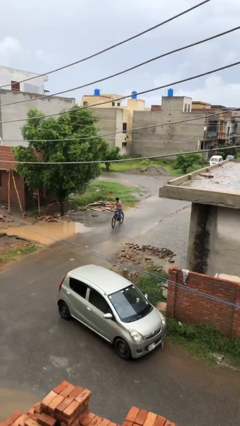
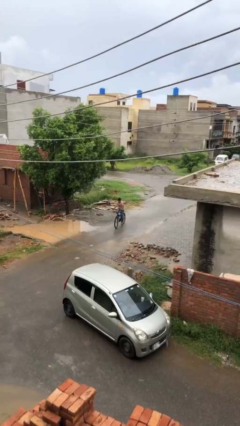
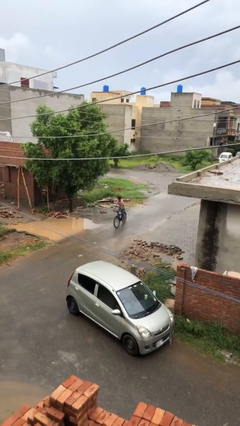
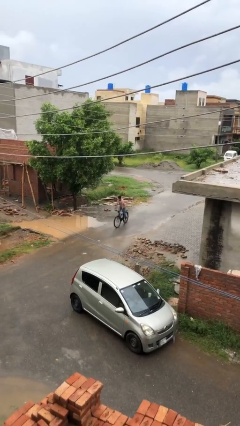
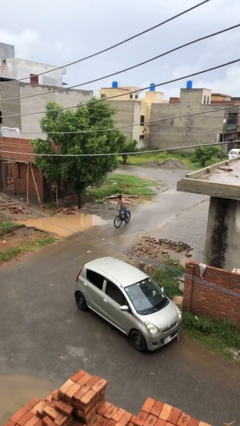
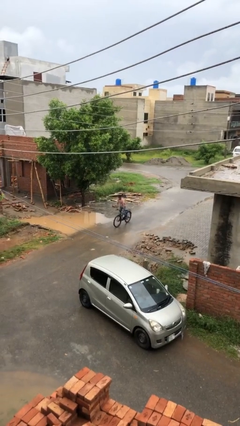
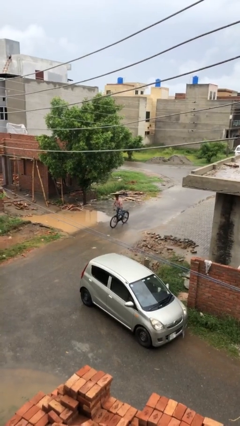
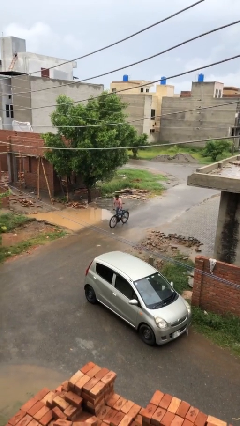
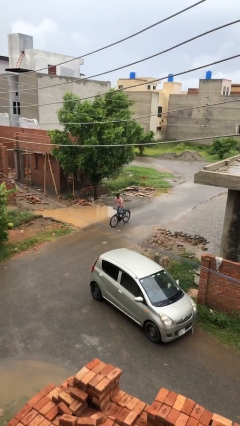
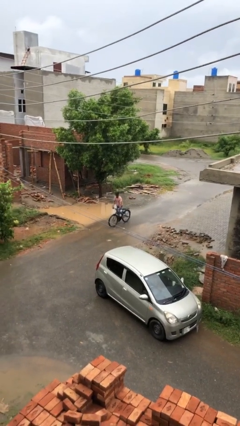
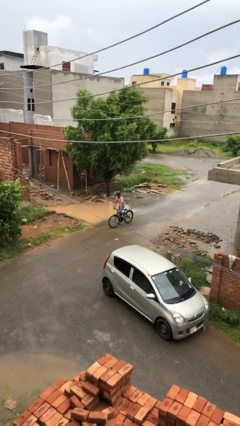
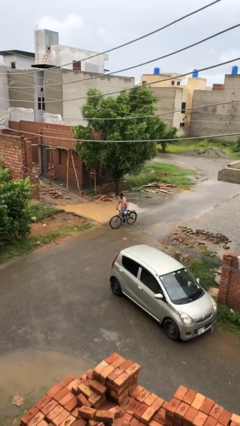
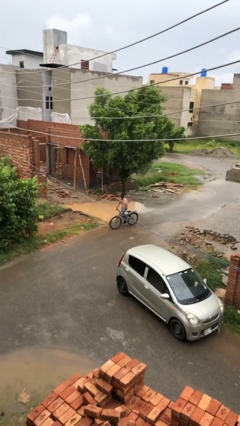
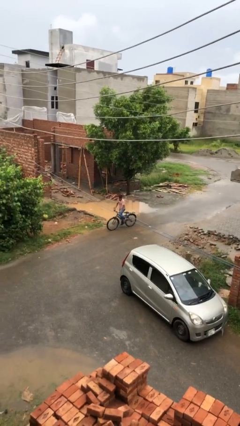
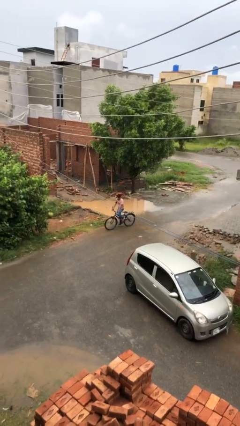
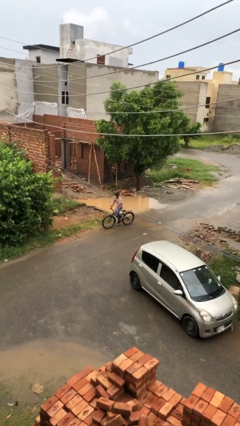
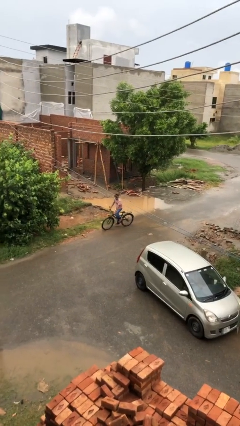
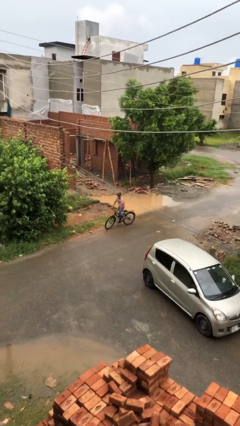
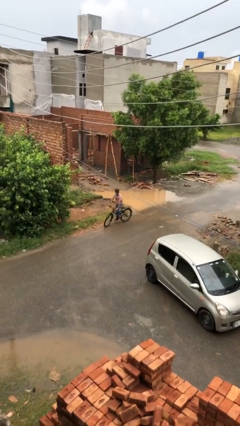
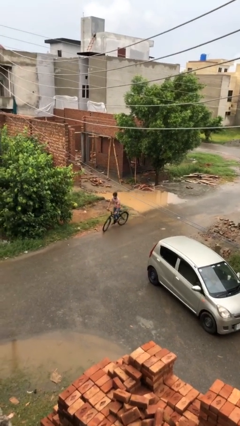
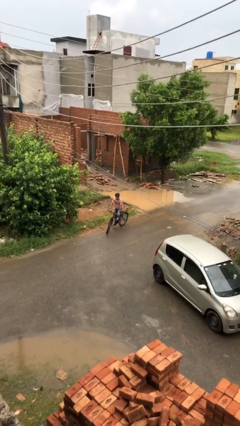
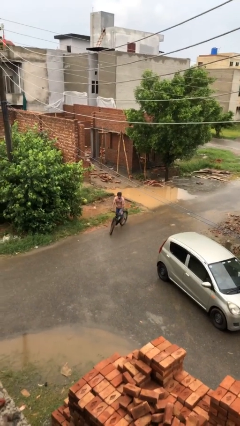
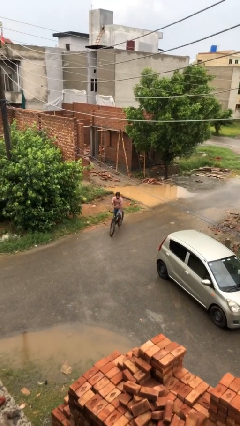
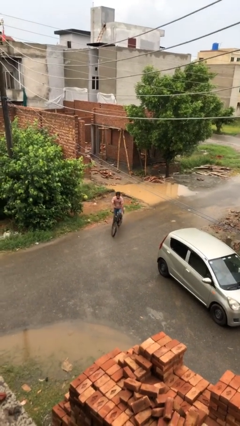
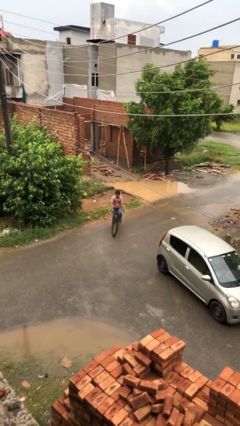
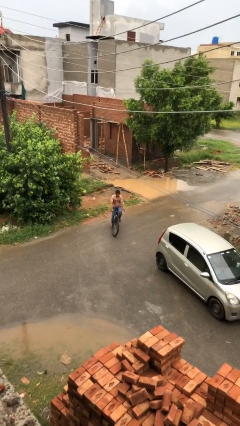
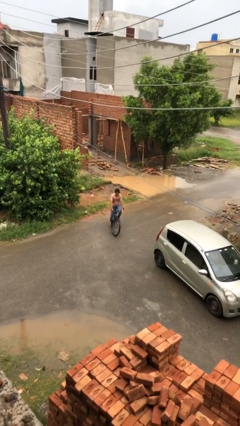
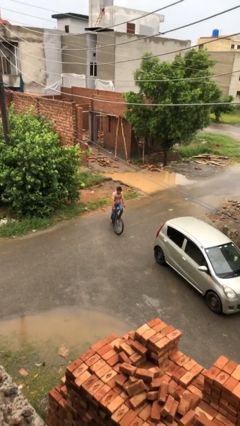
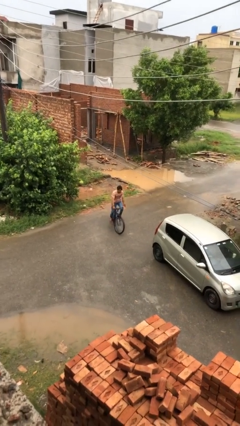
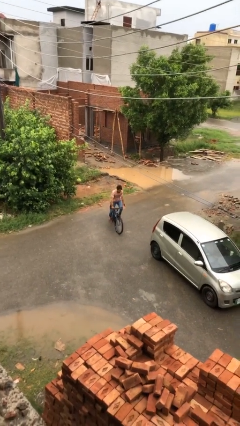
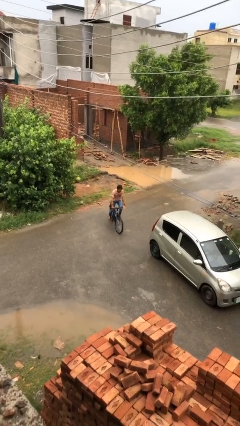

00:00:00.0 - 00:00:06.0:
person rides bicycle

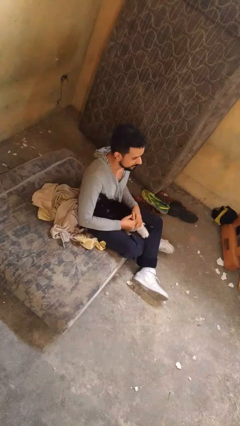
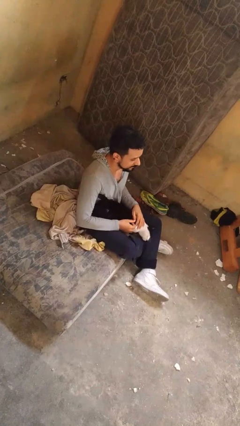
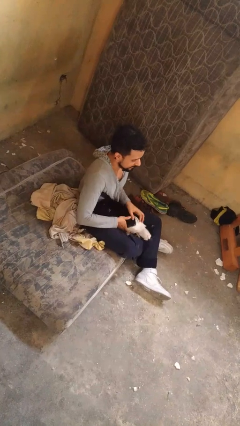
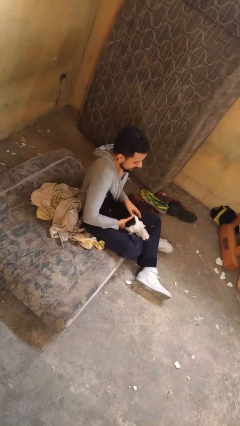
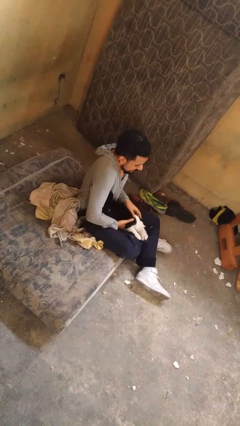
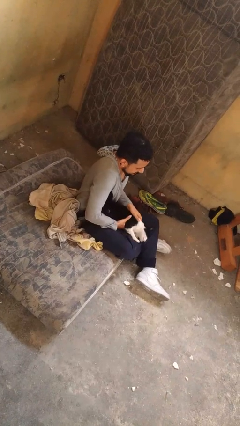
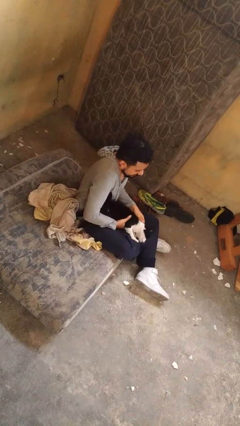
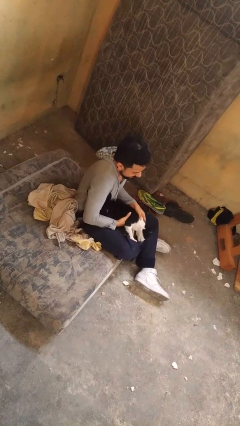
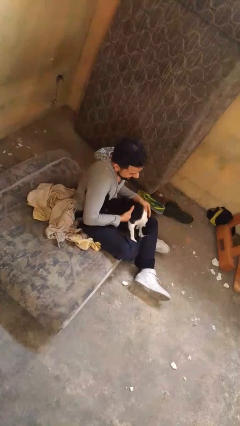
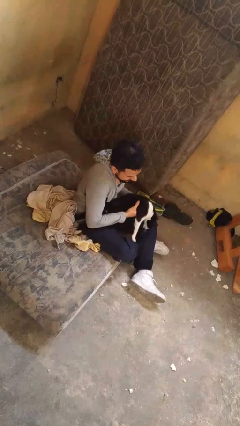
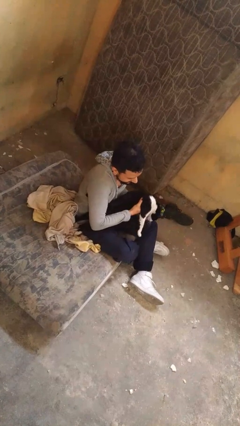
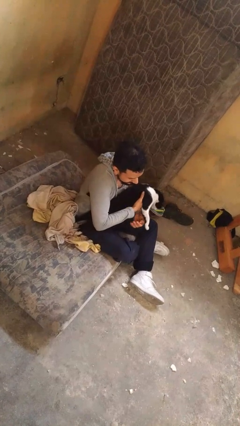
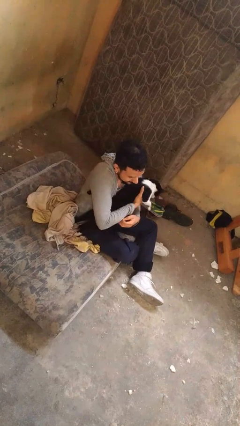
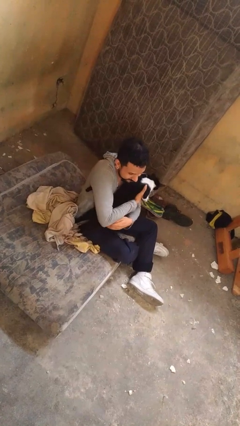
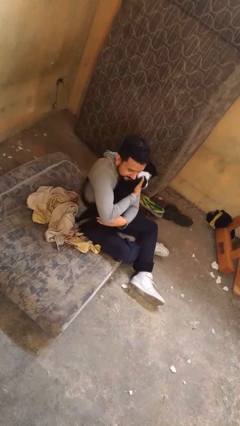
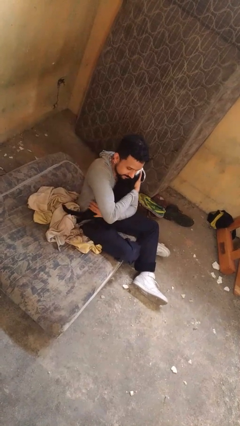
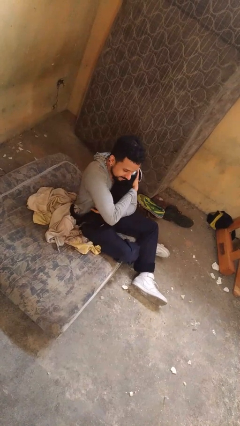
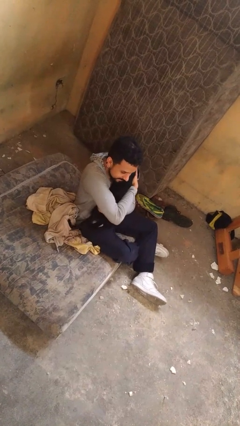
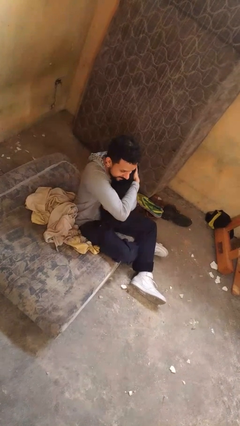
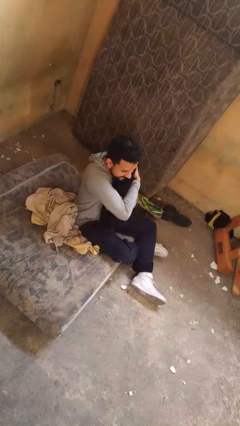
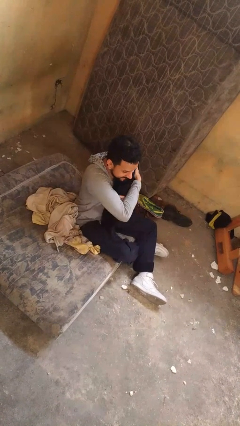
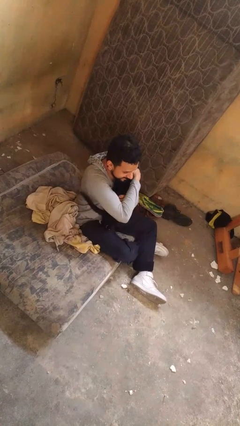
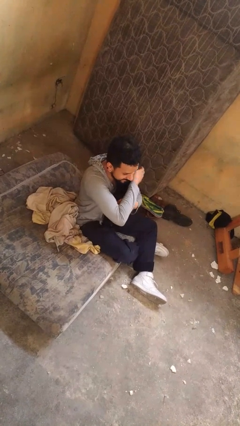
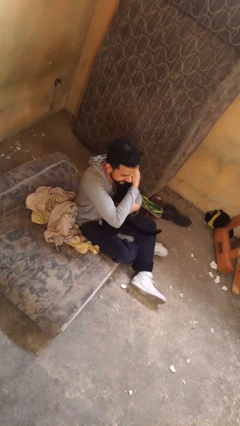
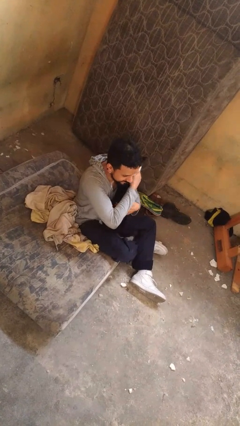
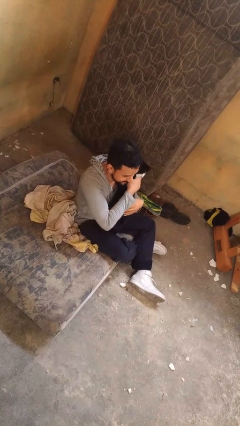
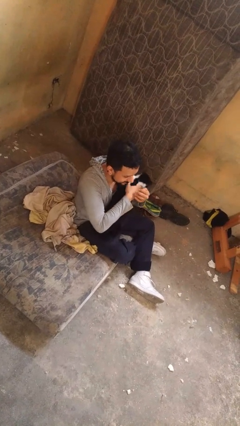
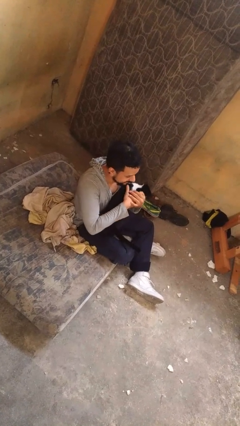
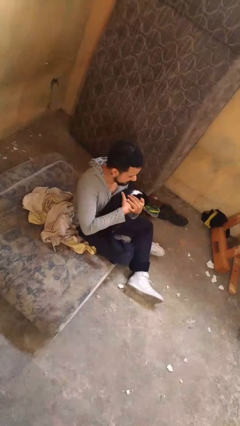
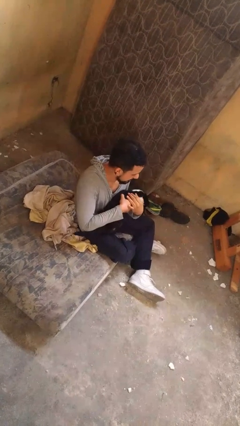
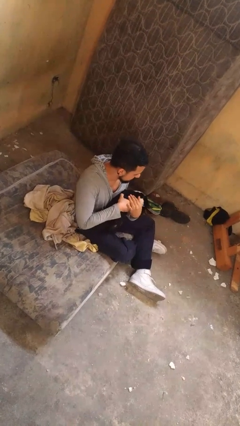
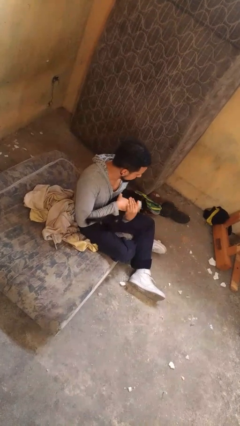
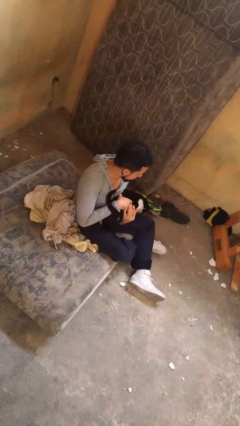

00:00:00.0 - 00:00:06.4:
person hugs cat

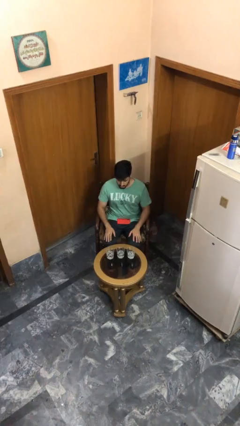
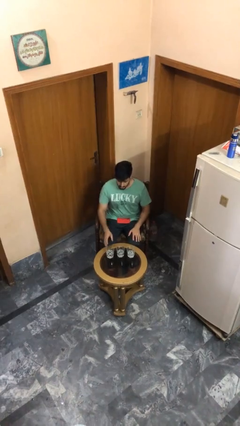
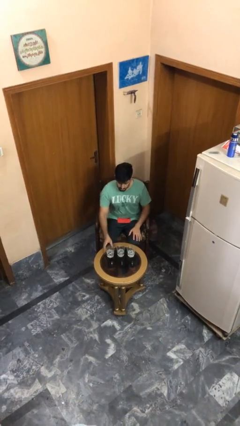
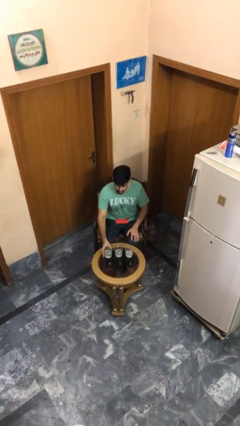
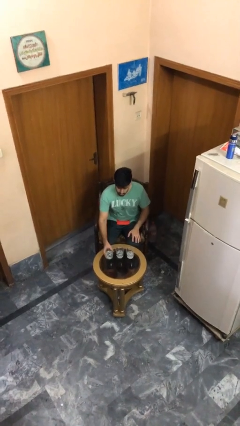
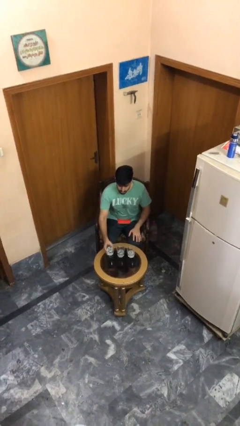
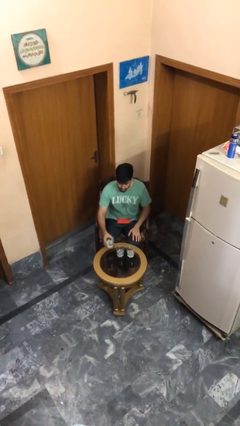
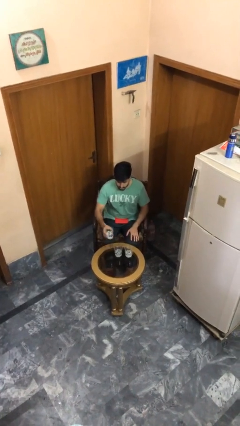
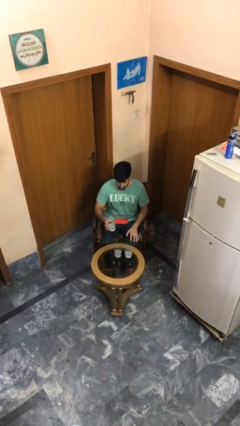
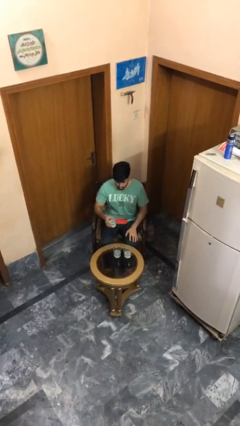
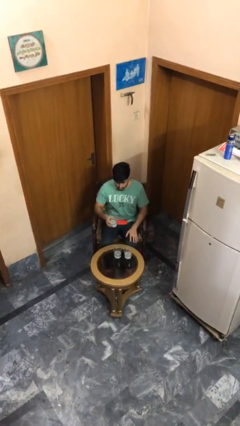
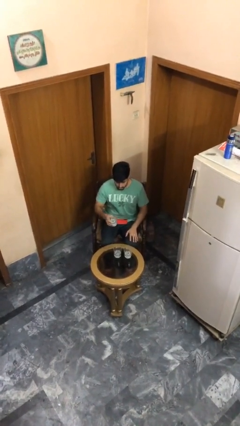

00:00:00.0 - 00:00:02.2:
person picks up object from table

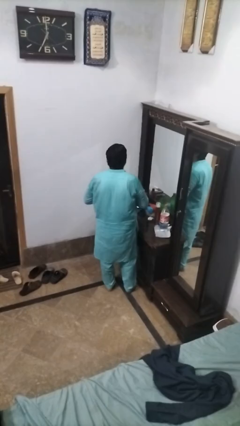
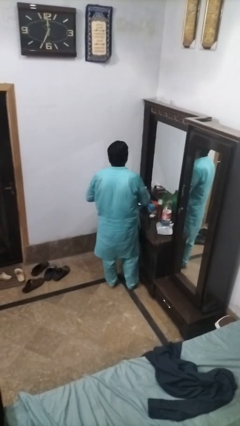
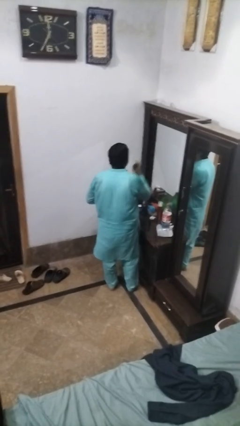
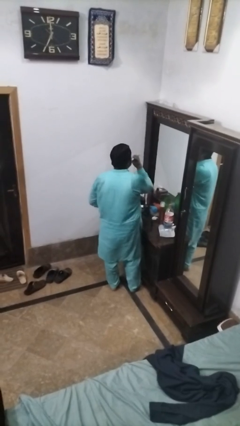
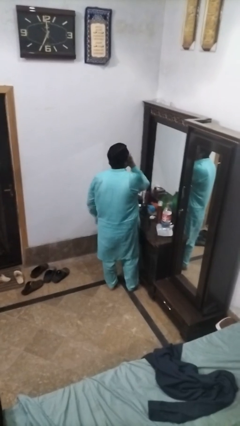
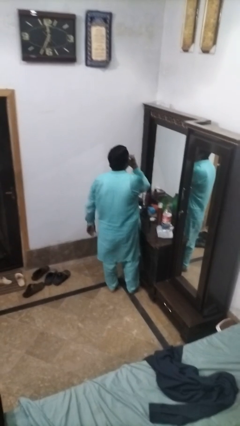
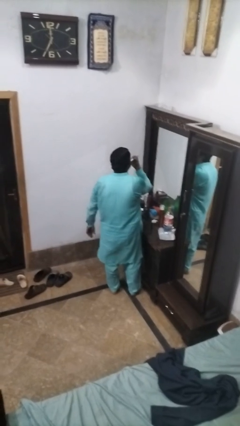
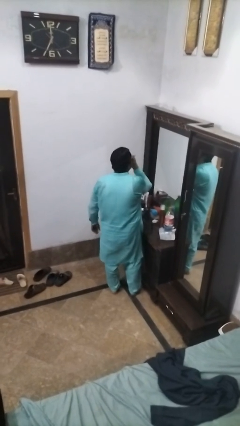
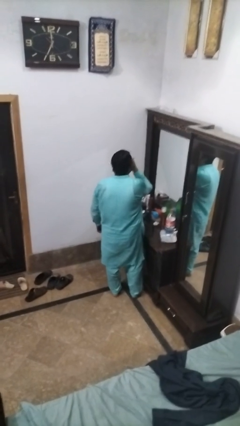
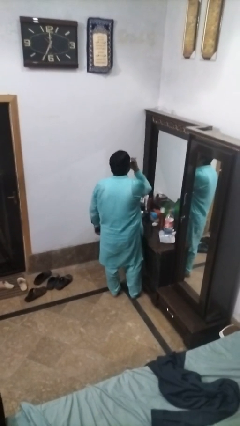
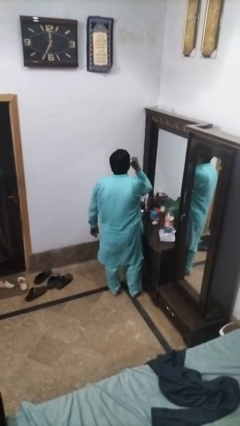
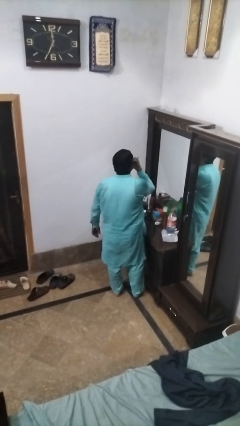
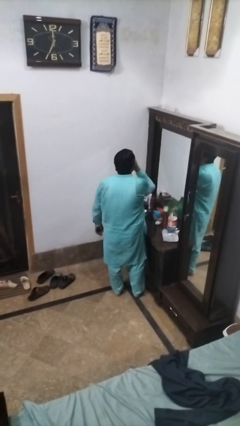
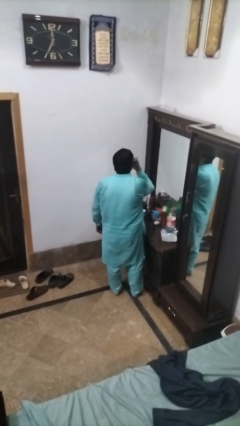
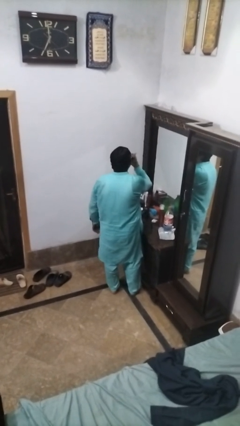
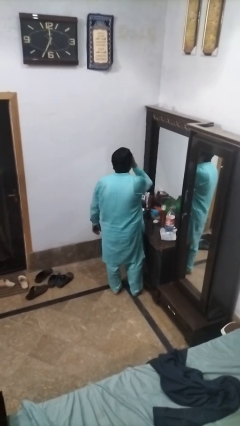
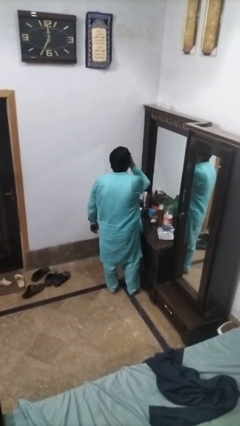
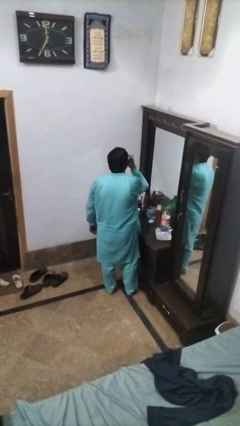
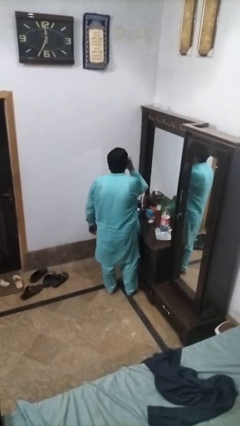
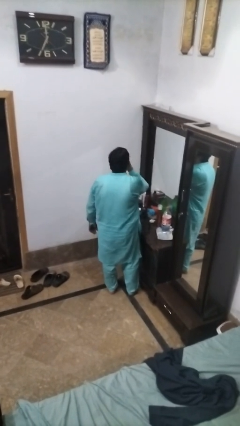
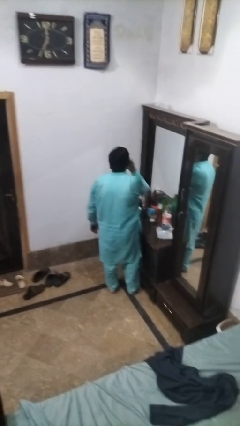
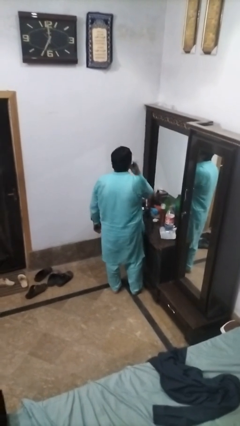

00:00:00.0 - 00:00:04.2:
person applies lip makeup
